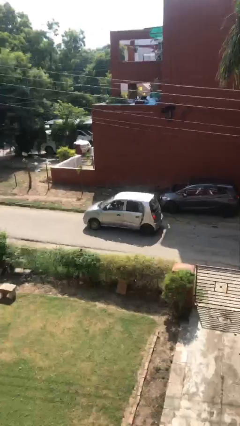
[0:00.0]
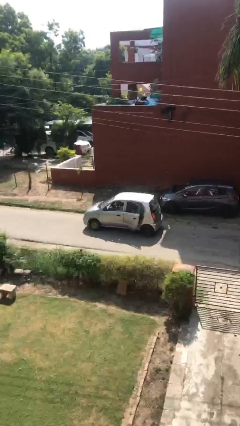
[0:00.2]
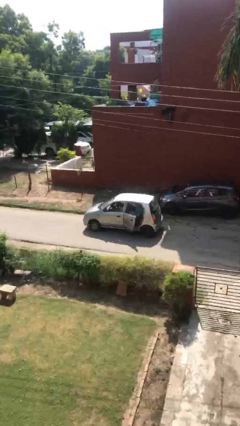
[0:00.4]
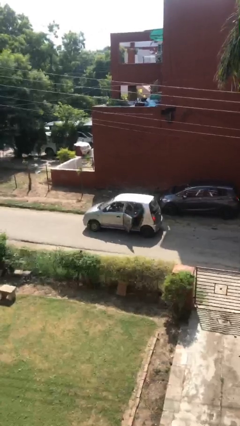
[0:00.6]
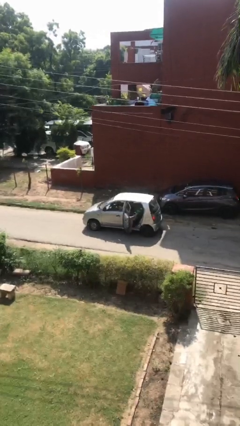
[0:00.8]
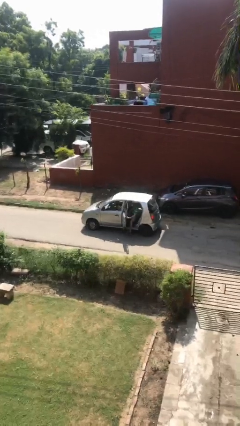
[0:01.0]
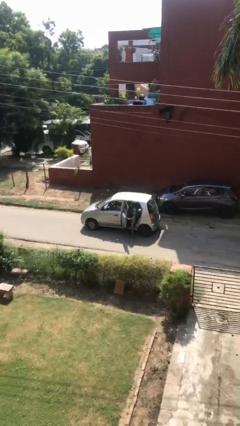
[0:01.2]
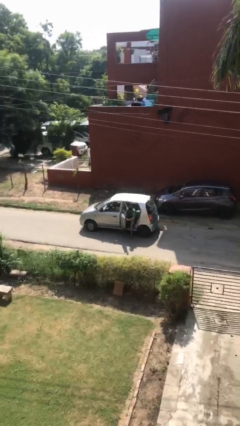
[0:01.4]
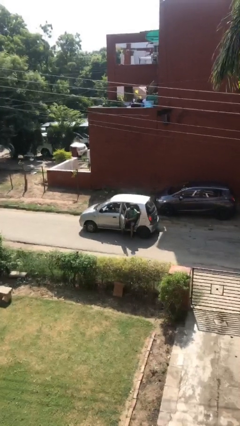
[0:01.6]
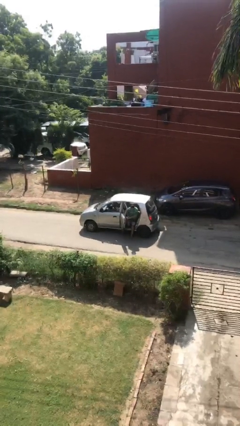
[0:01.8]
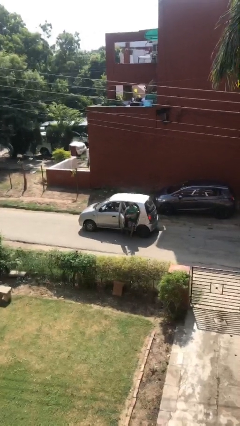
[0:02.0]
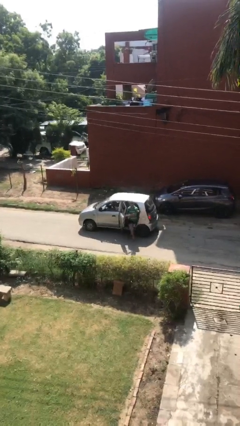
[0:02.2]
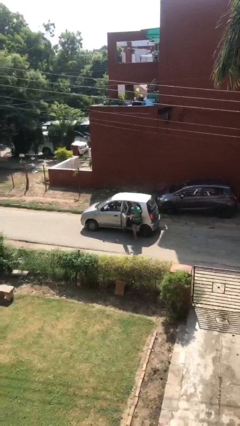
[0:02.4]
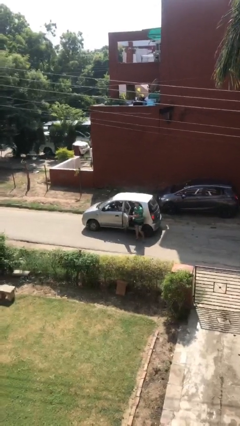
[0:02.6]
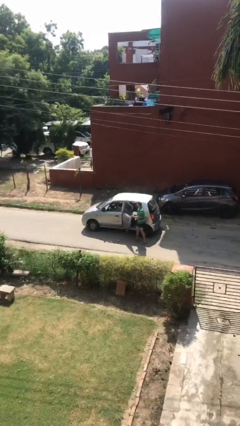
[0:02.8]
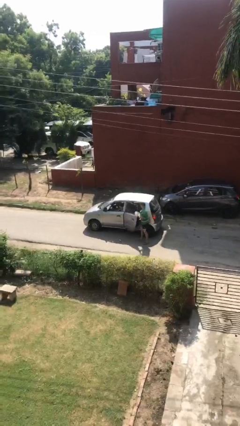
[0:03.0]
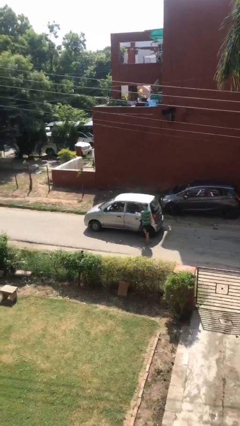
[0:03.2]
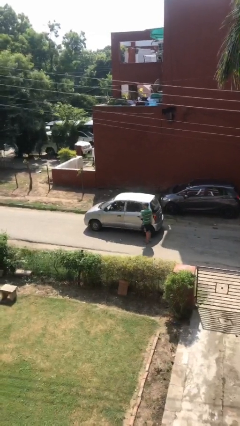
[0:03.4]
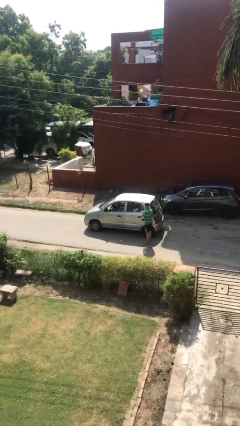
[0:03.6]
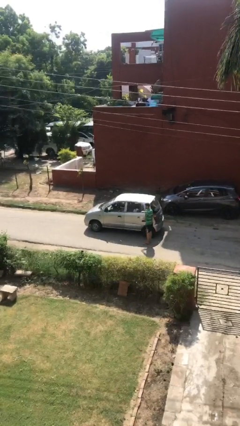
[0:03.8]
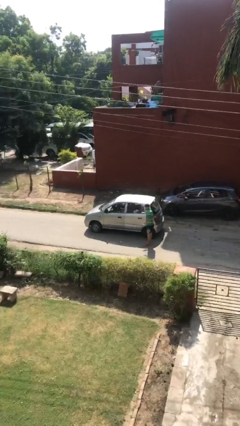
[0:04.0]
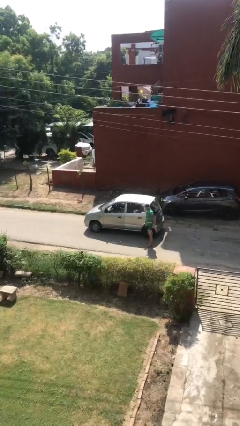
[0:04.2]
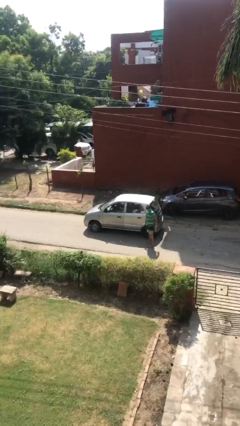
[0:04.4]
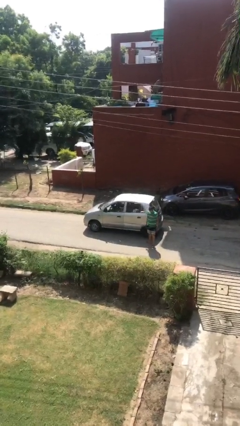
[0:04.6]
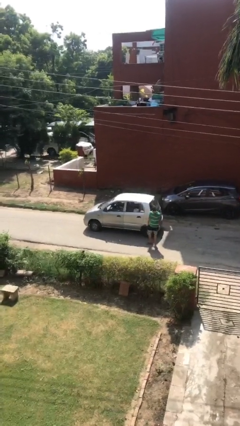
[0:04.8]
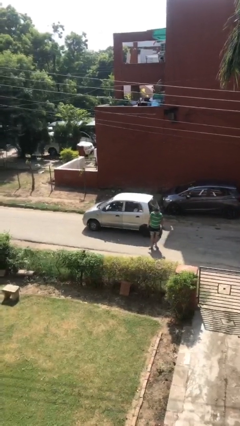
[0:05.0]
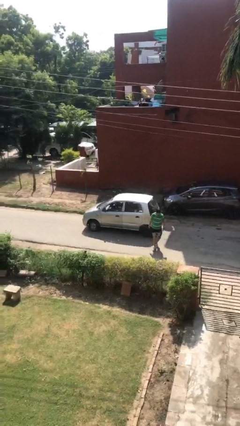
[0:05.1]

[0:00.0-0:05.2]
car drops off person

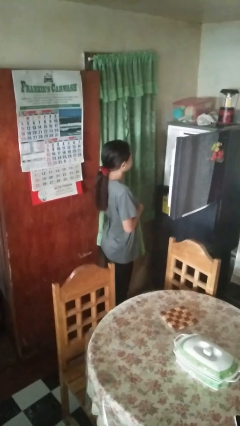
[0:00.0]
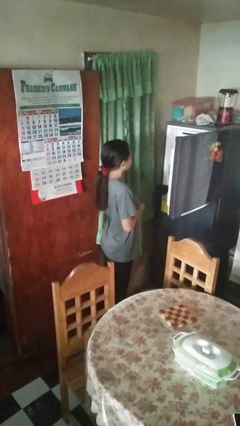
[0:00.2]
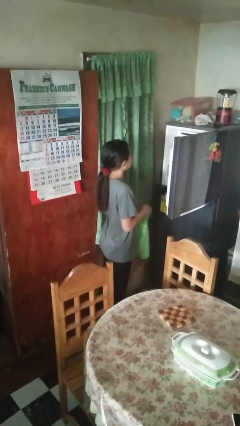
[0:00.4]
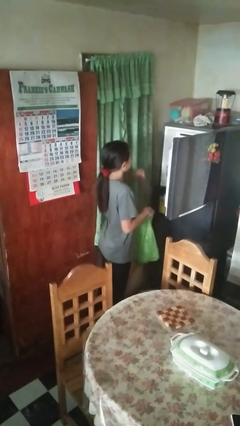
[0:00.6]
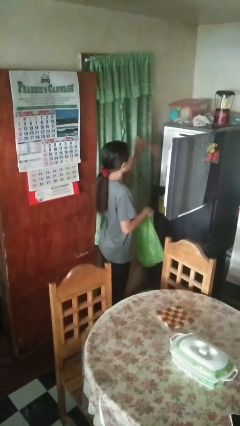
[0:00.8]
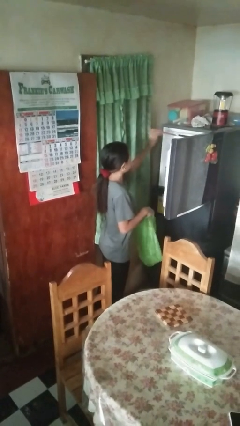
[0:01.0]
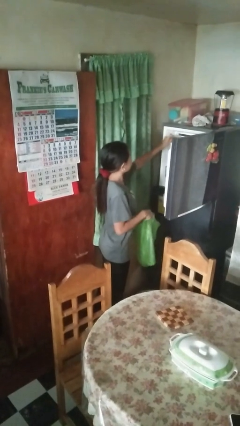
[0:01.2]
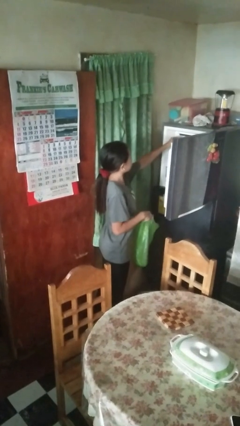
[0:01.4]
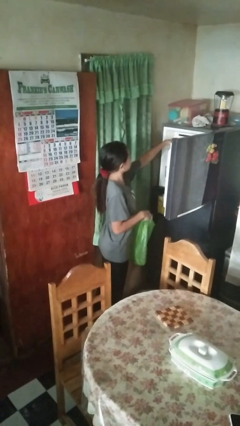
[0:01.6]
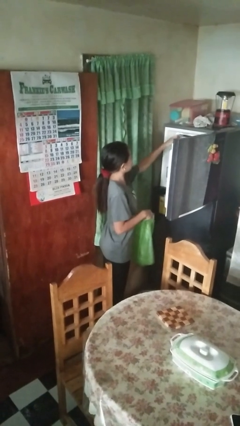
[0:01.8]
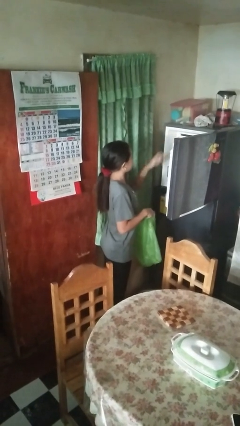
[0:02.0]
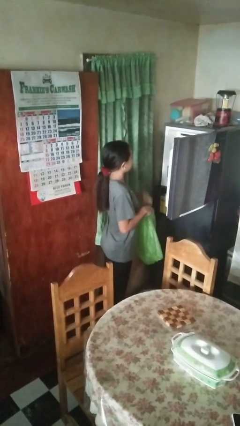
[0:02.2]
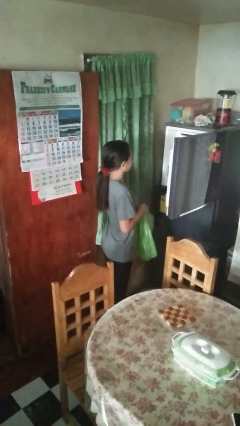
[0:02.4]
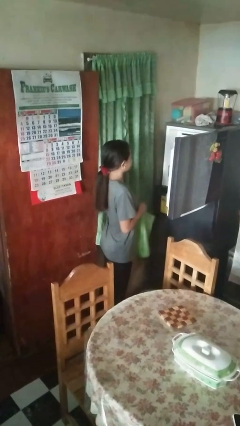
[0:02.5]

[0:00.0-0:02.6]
person loads groceries into refrigerator

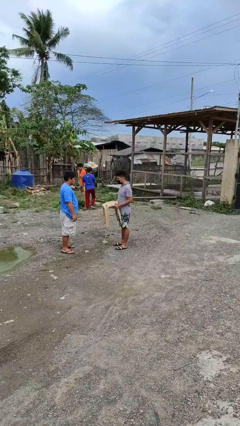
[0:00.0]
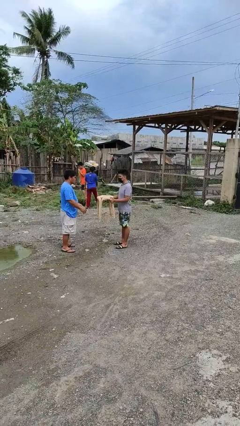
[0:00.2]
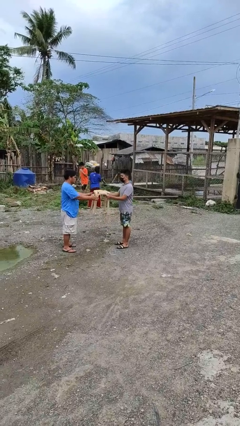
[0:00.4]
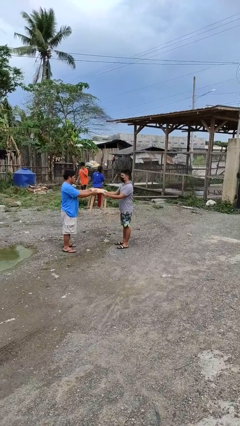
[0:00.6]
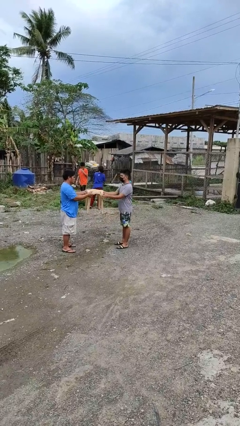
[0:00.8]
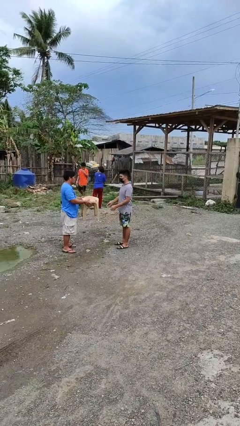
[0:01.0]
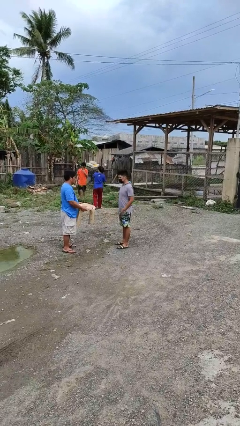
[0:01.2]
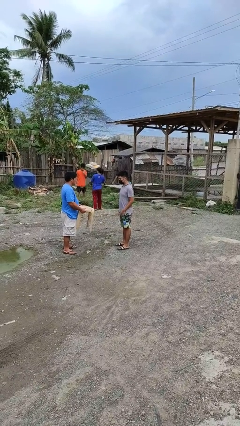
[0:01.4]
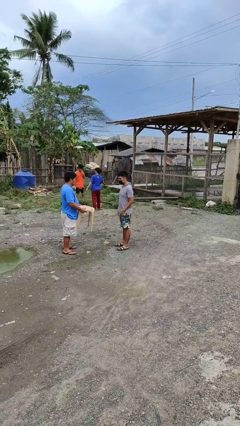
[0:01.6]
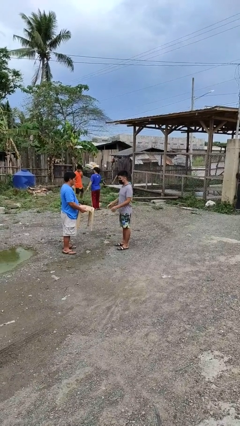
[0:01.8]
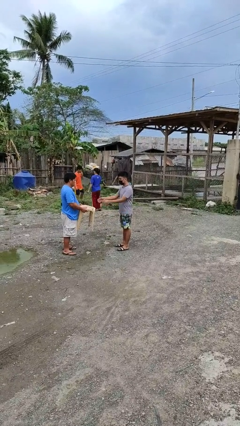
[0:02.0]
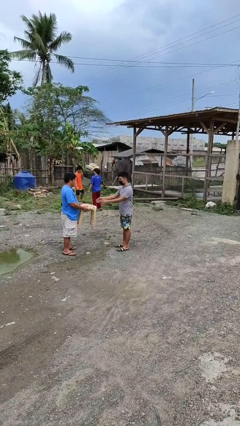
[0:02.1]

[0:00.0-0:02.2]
person transfers object to person

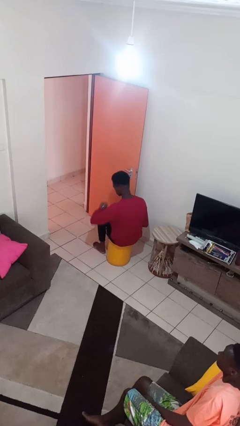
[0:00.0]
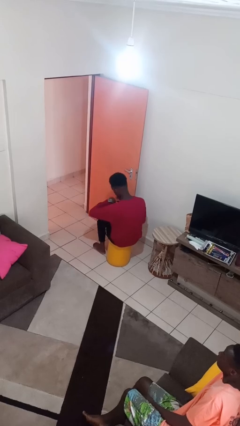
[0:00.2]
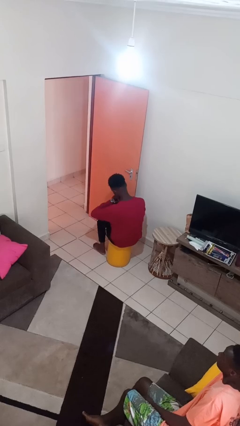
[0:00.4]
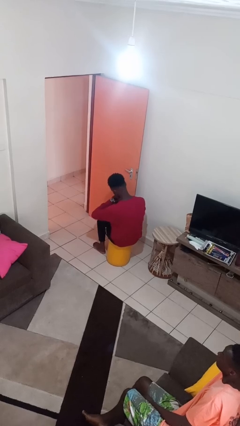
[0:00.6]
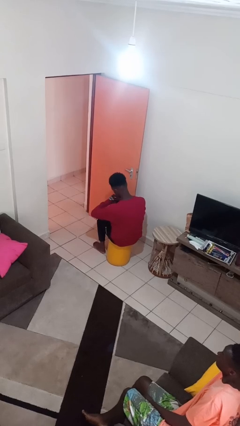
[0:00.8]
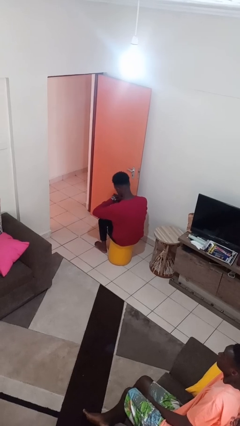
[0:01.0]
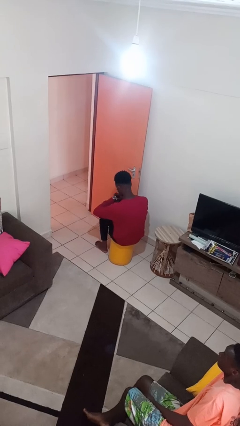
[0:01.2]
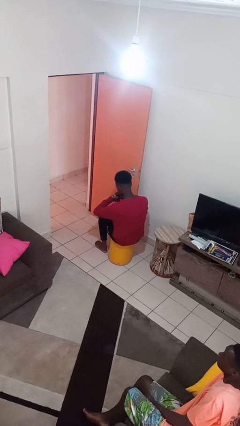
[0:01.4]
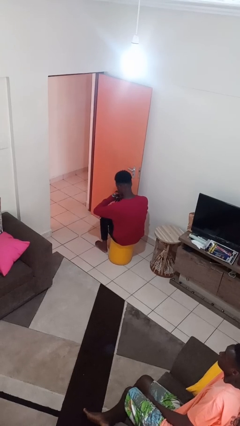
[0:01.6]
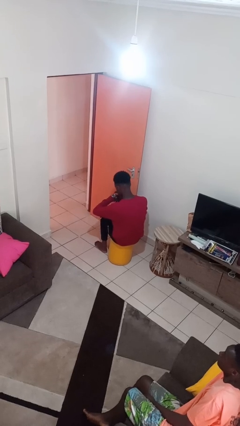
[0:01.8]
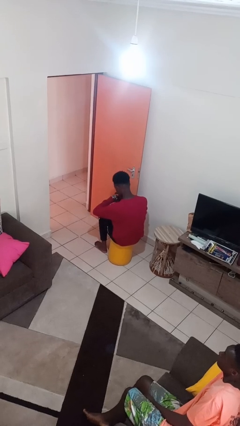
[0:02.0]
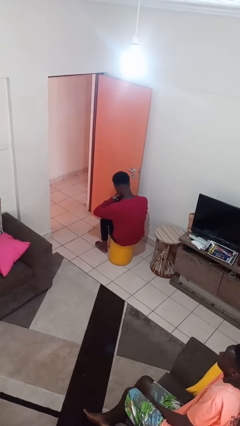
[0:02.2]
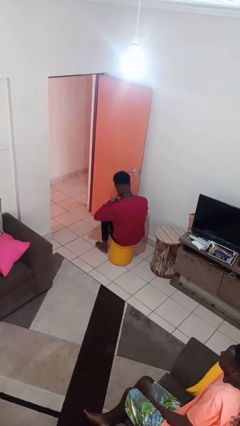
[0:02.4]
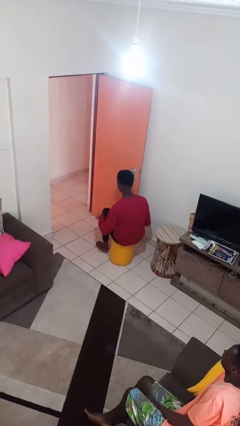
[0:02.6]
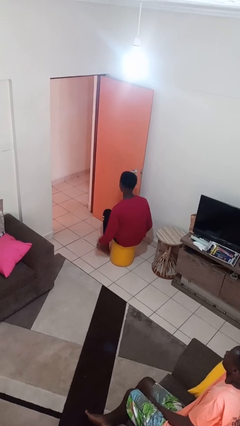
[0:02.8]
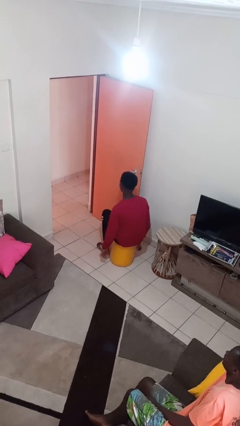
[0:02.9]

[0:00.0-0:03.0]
person looks at wristwatch

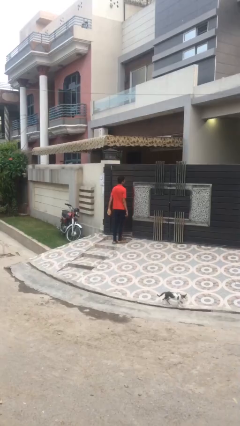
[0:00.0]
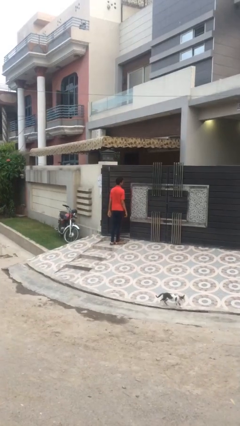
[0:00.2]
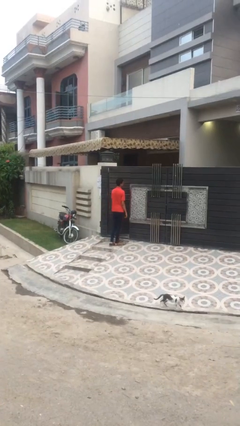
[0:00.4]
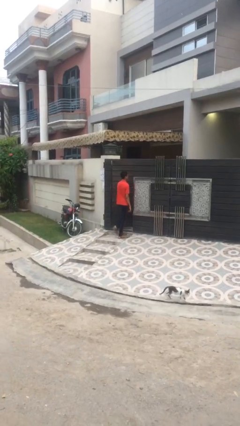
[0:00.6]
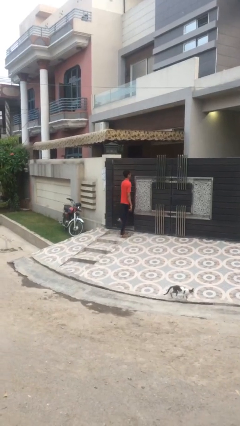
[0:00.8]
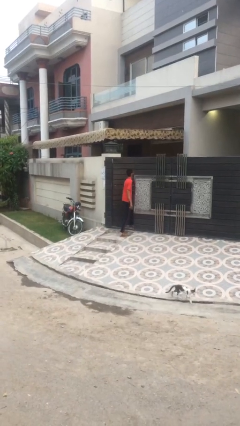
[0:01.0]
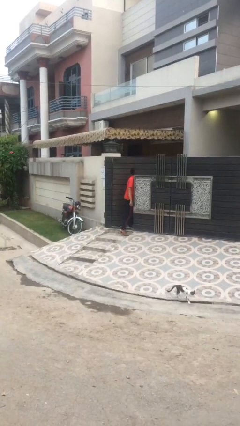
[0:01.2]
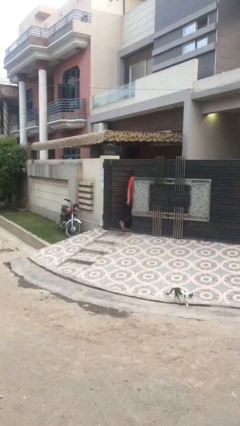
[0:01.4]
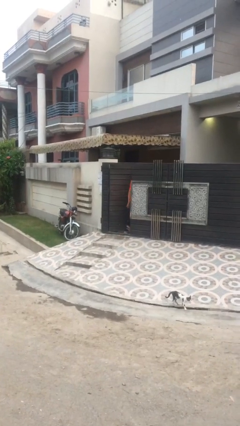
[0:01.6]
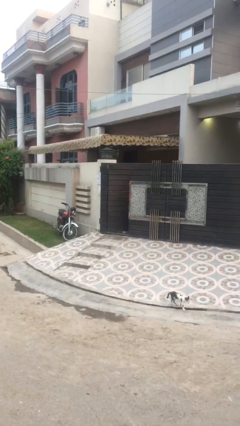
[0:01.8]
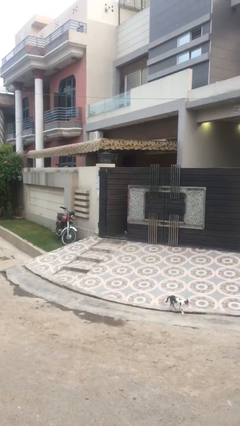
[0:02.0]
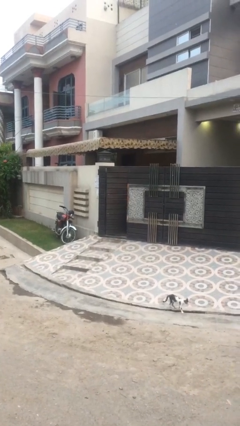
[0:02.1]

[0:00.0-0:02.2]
person exits scene through structure

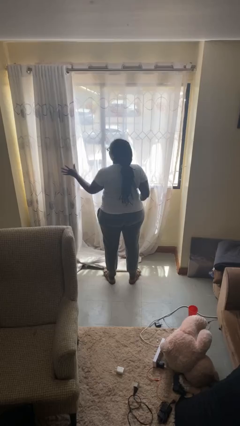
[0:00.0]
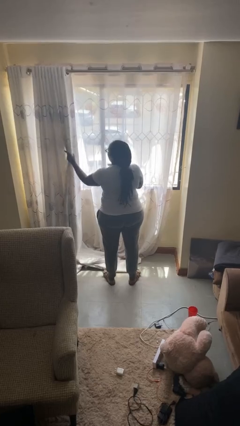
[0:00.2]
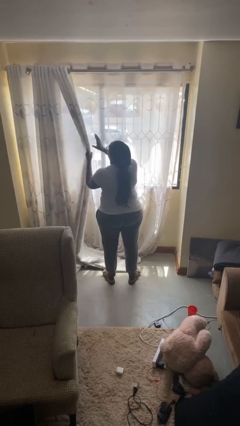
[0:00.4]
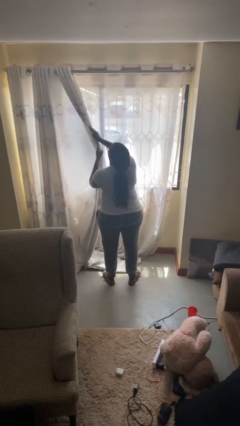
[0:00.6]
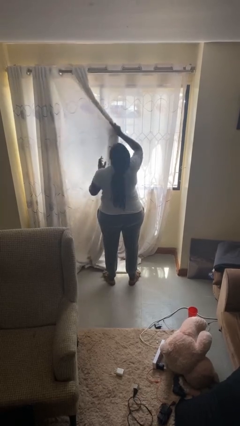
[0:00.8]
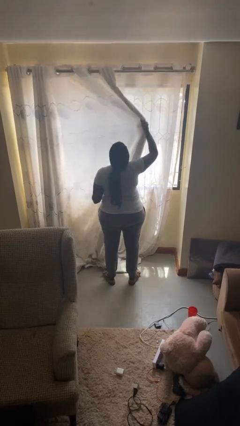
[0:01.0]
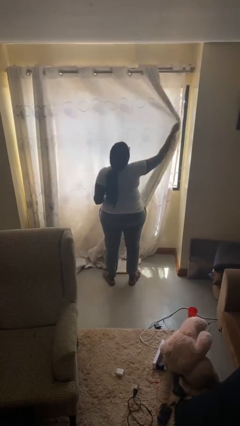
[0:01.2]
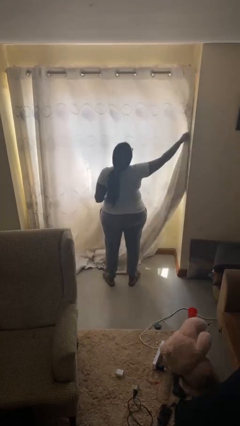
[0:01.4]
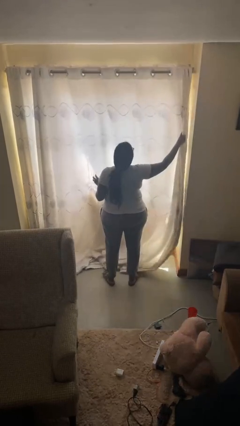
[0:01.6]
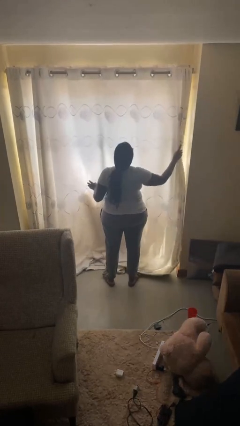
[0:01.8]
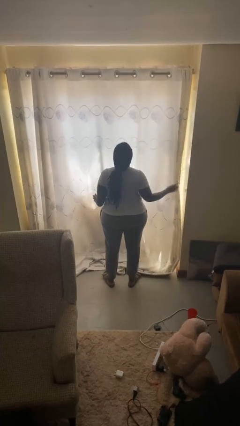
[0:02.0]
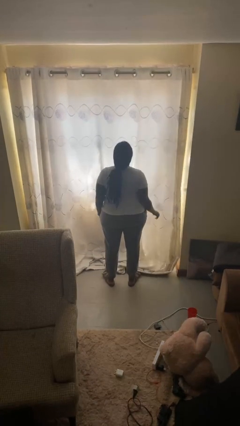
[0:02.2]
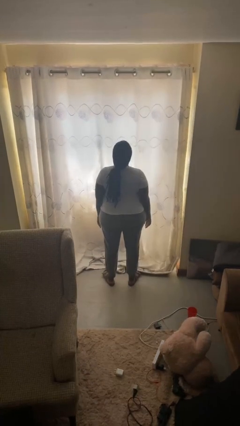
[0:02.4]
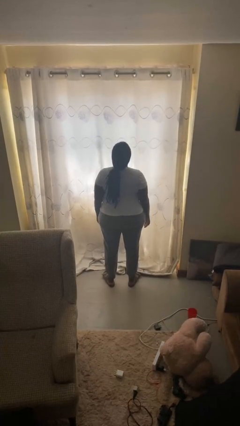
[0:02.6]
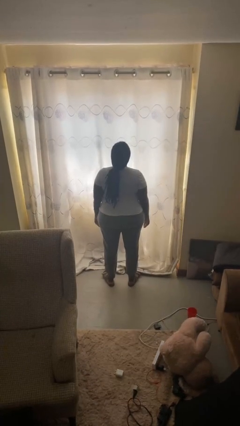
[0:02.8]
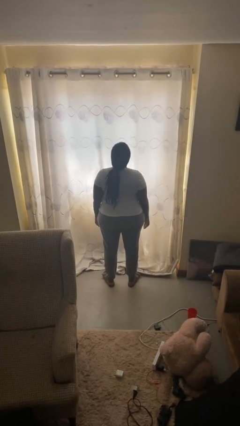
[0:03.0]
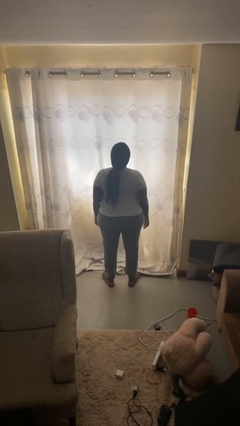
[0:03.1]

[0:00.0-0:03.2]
person closes curtains
